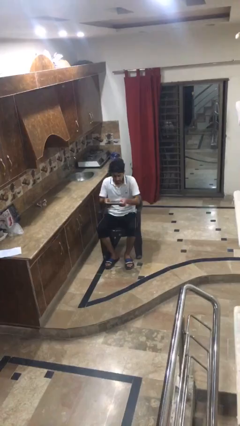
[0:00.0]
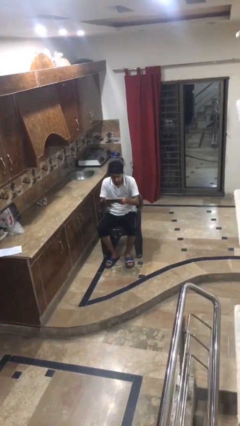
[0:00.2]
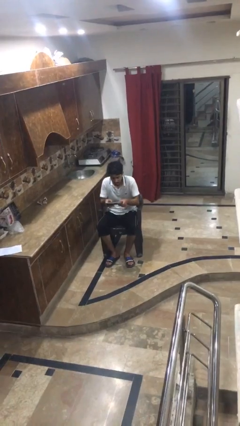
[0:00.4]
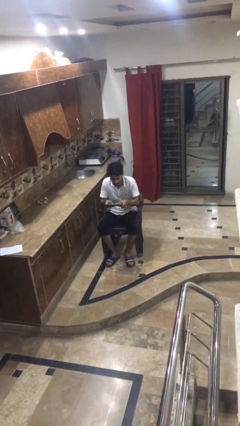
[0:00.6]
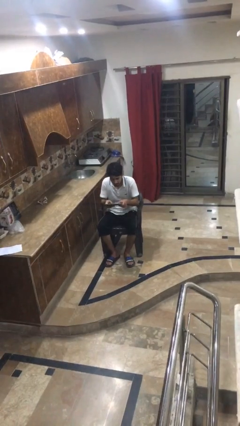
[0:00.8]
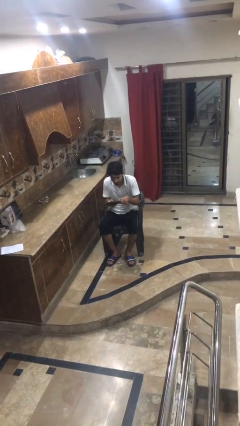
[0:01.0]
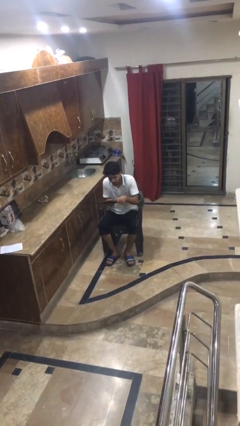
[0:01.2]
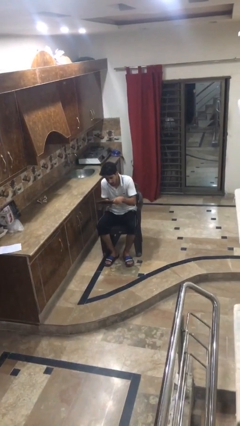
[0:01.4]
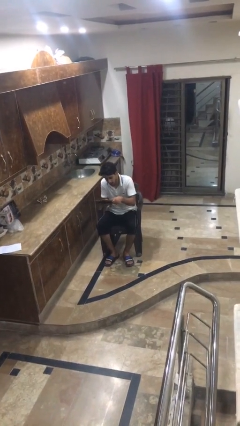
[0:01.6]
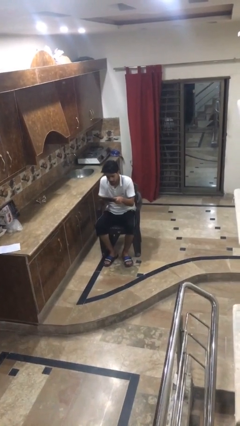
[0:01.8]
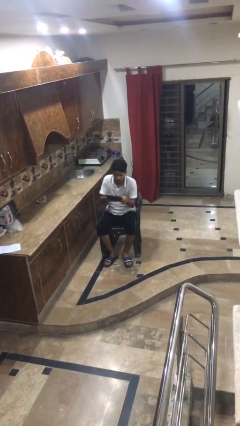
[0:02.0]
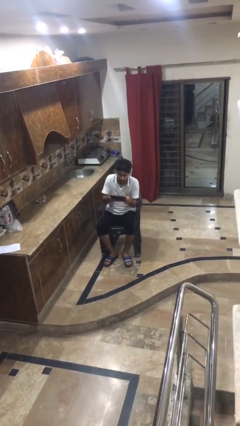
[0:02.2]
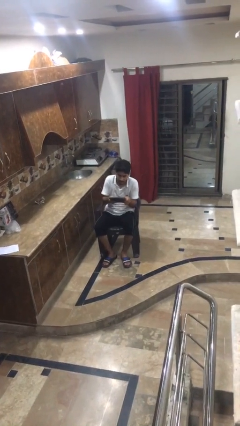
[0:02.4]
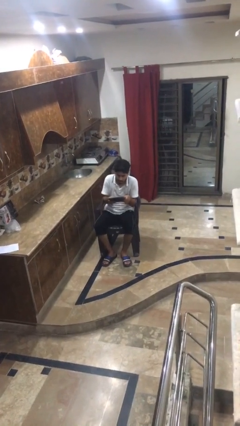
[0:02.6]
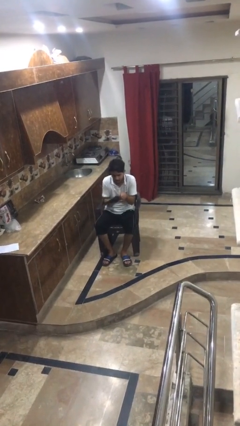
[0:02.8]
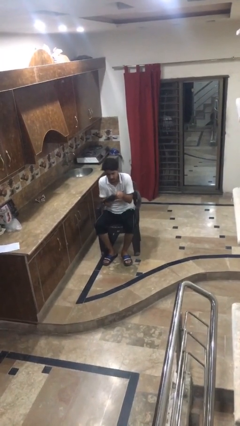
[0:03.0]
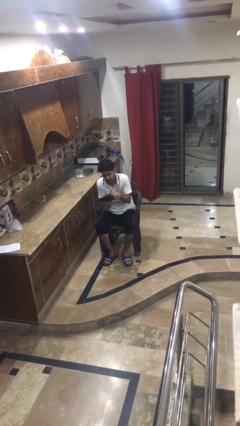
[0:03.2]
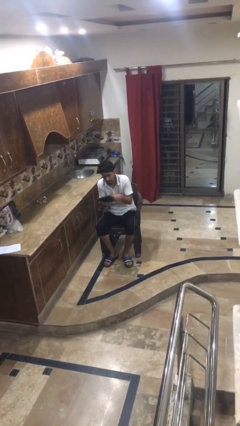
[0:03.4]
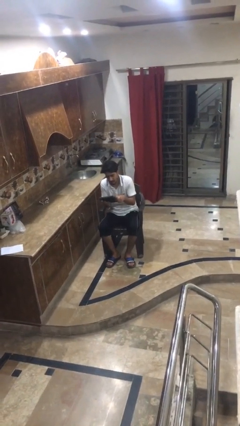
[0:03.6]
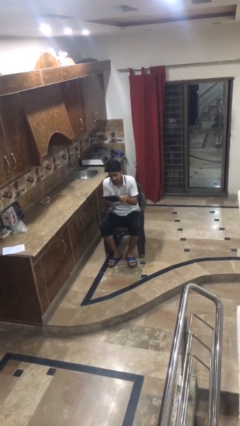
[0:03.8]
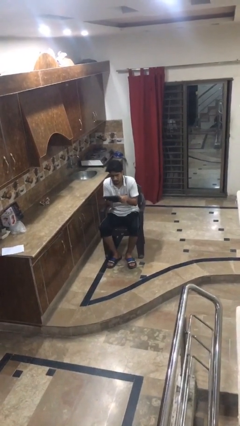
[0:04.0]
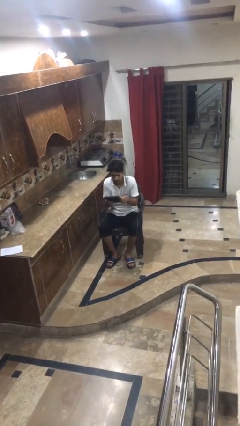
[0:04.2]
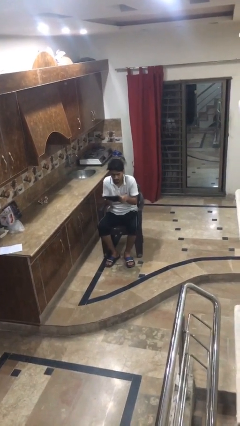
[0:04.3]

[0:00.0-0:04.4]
person interacts with handheld game

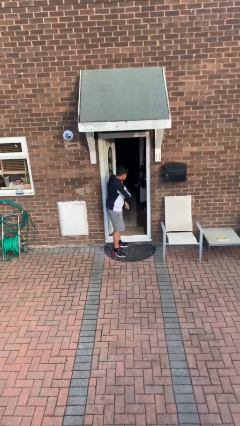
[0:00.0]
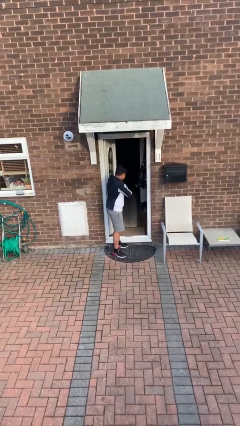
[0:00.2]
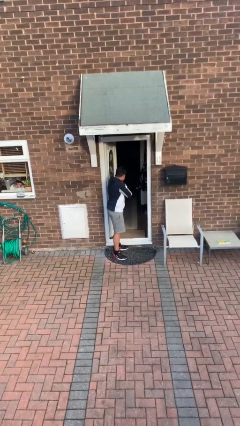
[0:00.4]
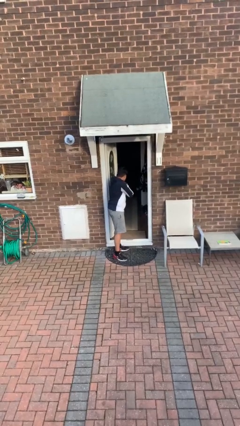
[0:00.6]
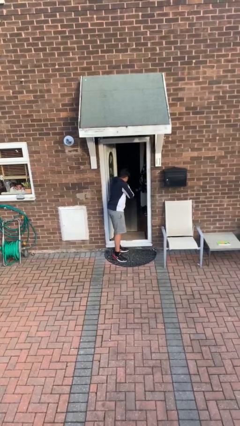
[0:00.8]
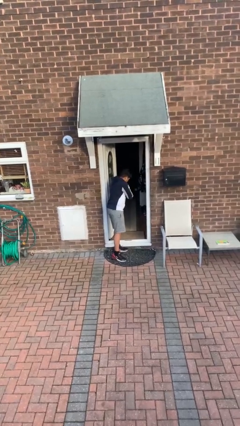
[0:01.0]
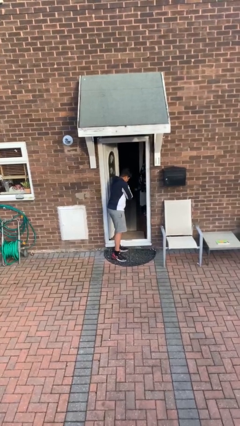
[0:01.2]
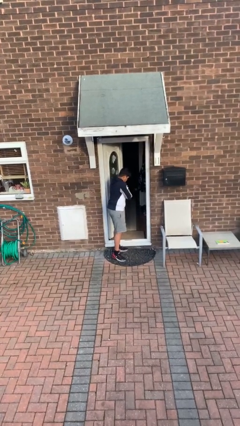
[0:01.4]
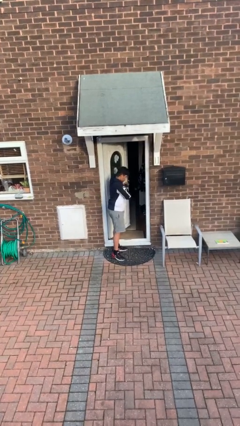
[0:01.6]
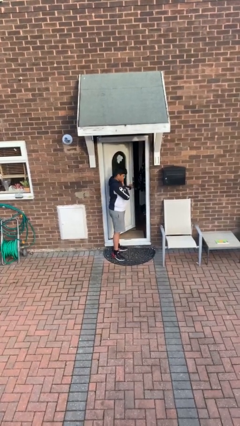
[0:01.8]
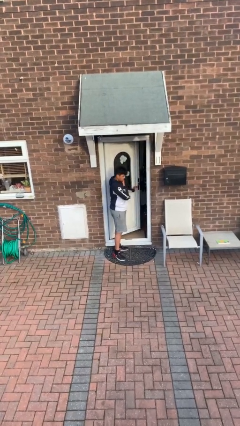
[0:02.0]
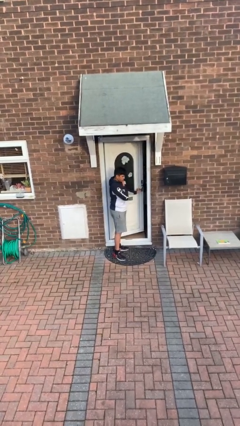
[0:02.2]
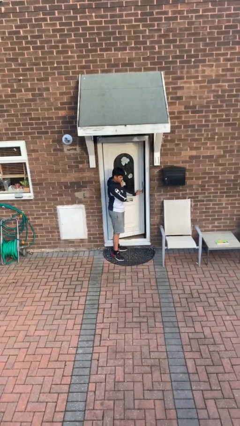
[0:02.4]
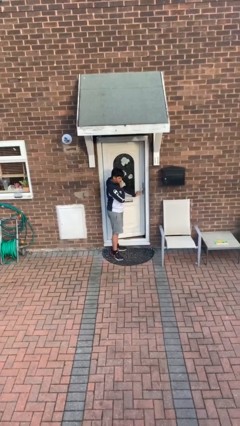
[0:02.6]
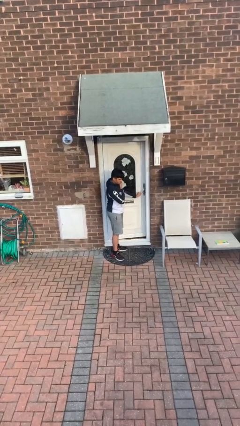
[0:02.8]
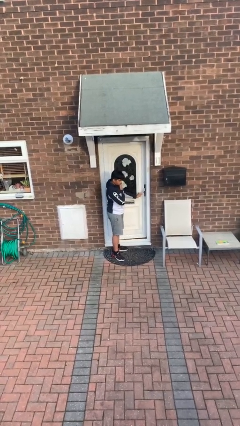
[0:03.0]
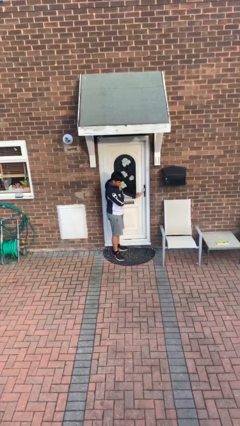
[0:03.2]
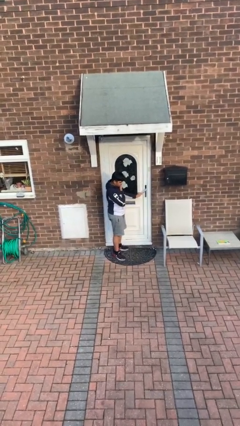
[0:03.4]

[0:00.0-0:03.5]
person closes facility door

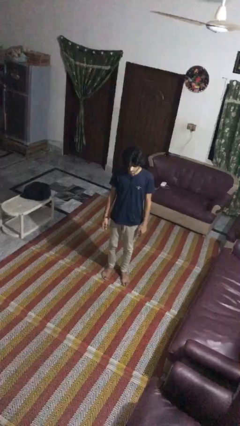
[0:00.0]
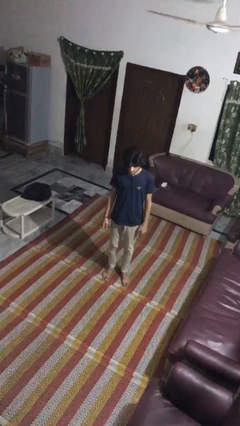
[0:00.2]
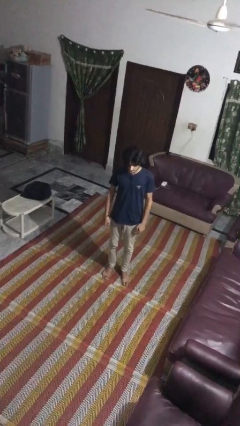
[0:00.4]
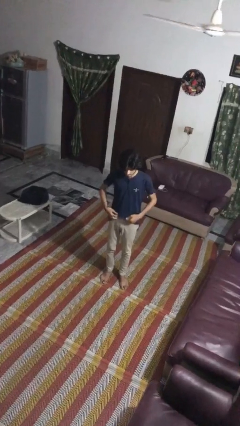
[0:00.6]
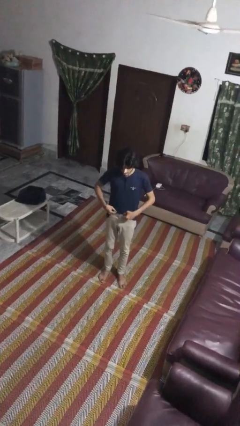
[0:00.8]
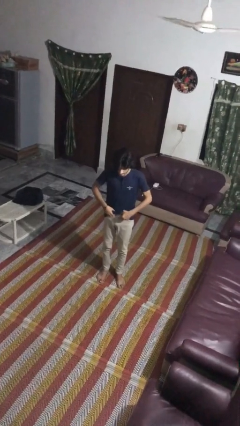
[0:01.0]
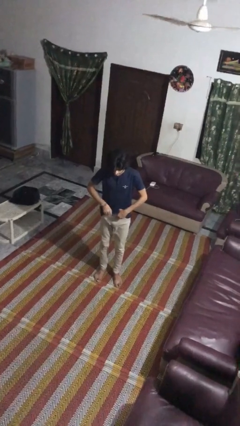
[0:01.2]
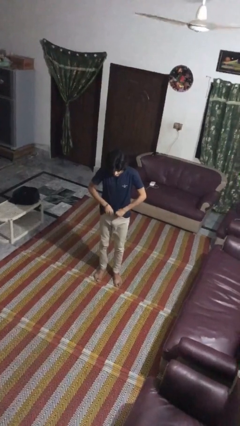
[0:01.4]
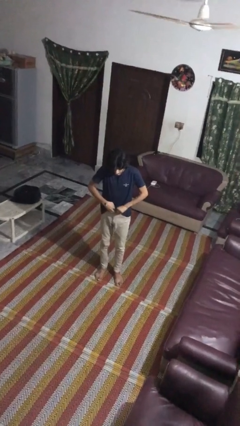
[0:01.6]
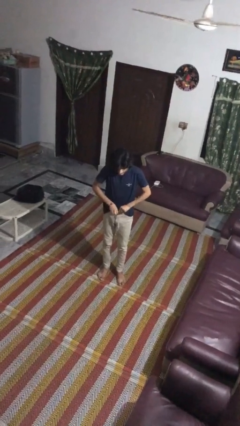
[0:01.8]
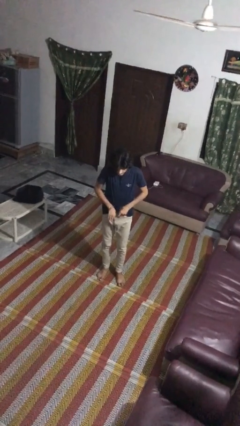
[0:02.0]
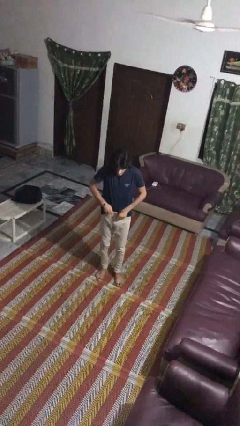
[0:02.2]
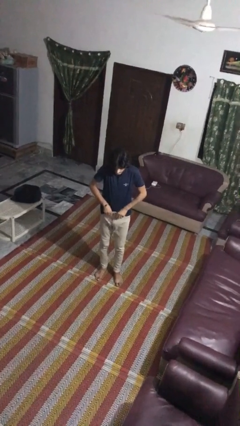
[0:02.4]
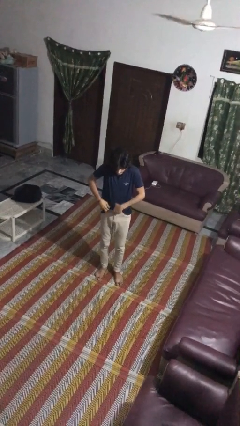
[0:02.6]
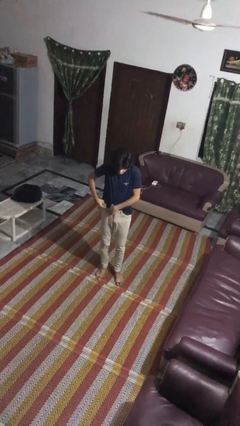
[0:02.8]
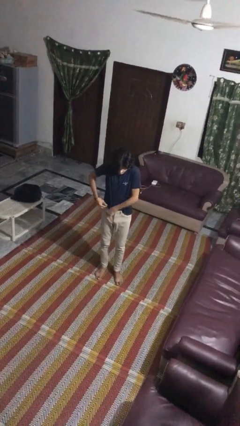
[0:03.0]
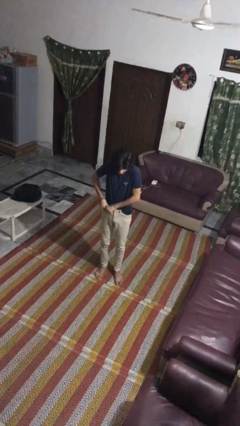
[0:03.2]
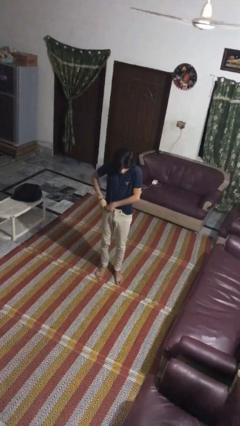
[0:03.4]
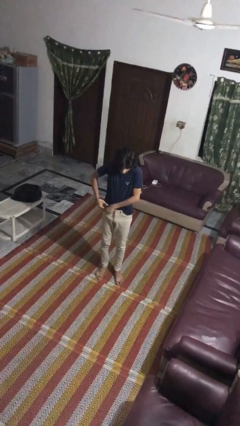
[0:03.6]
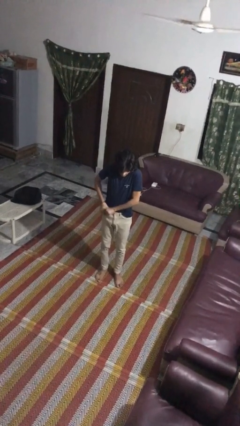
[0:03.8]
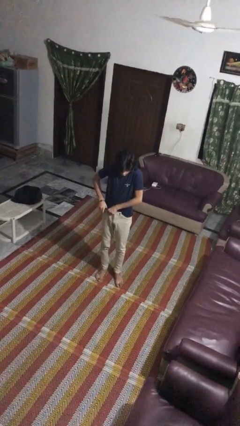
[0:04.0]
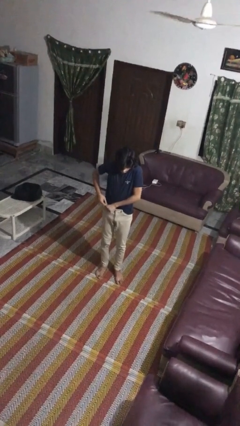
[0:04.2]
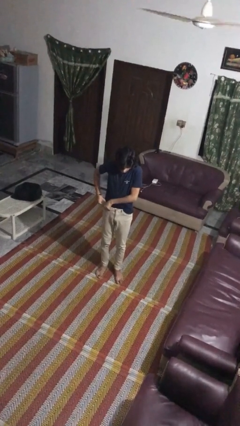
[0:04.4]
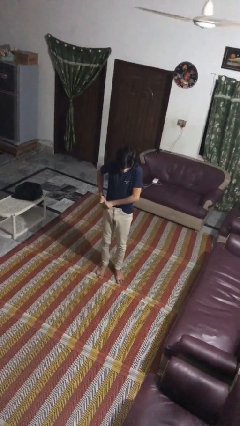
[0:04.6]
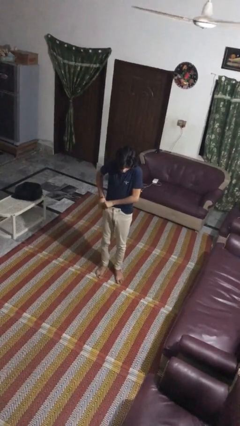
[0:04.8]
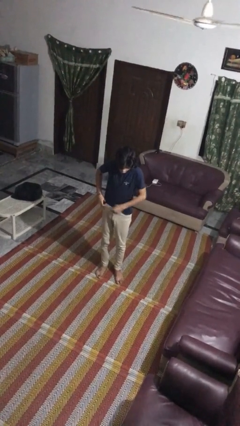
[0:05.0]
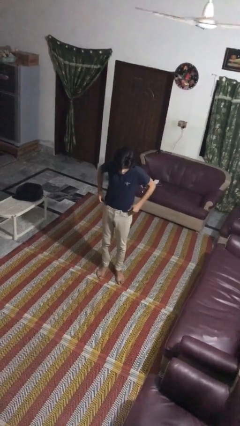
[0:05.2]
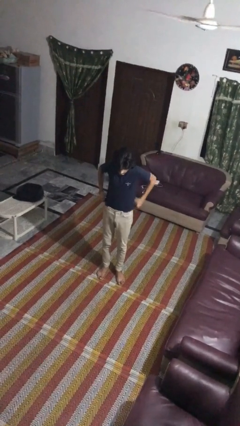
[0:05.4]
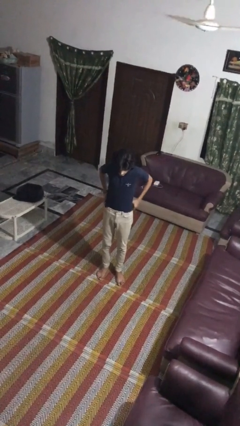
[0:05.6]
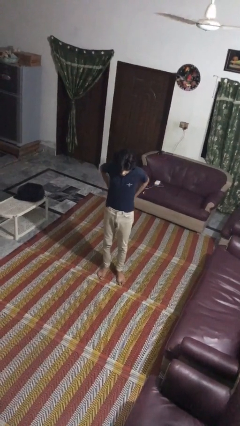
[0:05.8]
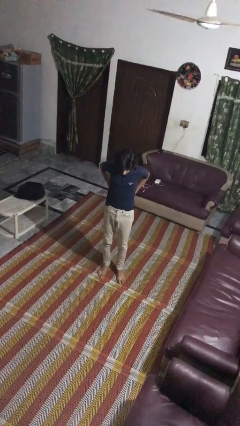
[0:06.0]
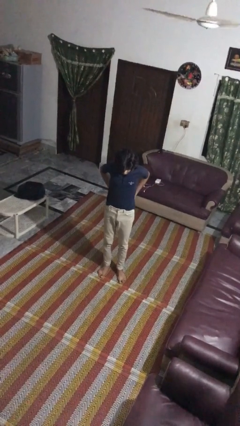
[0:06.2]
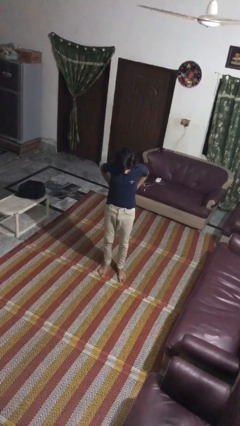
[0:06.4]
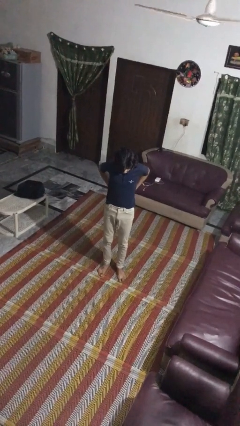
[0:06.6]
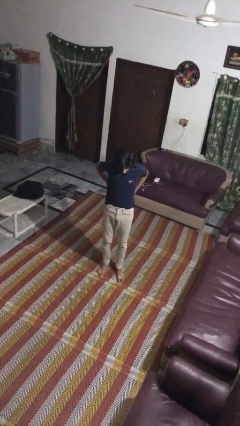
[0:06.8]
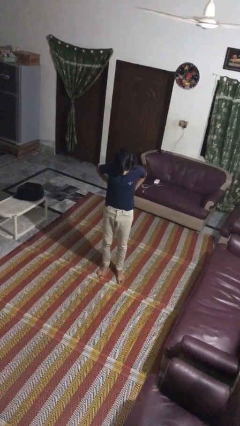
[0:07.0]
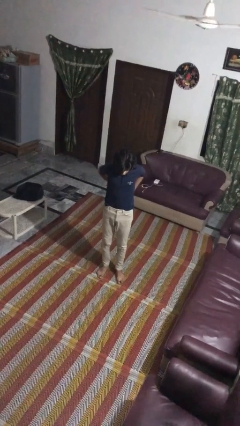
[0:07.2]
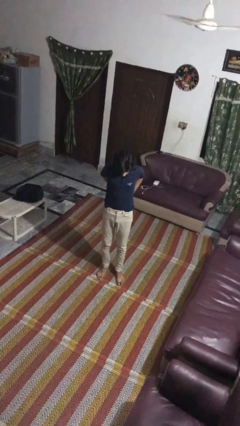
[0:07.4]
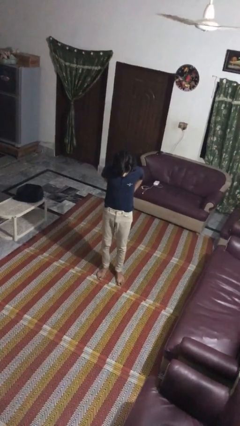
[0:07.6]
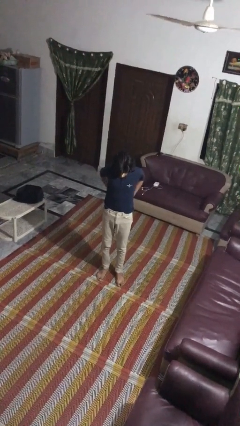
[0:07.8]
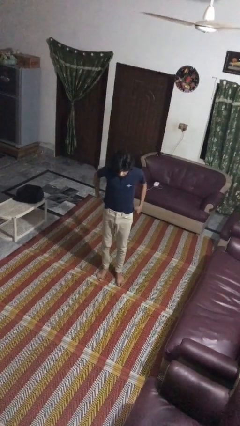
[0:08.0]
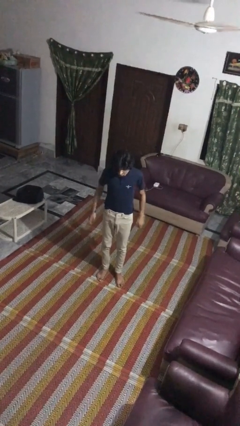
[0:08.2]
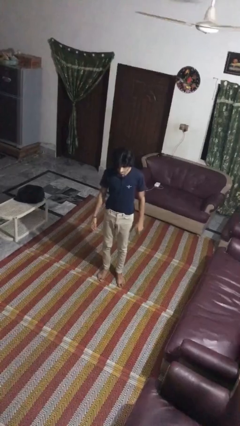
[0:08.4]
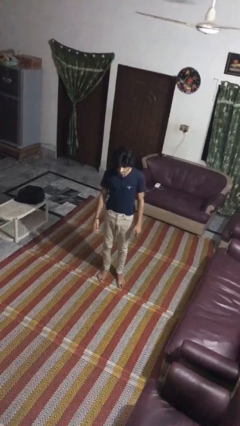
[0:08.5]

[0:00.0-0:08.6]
person tucks in shirt

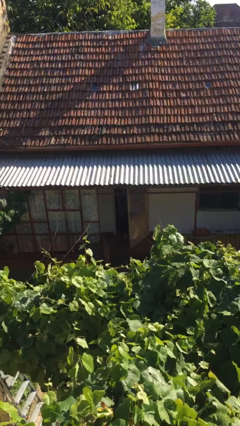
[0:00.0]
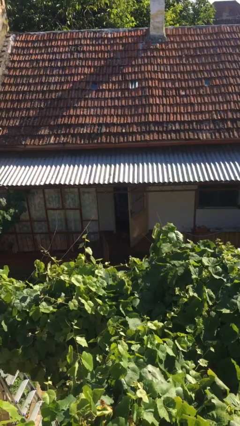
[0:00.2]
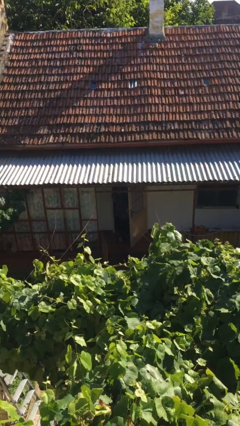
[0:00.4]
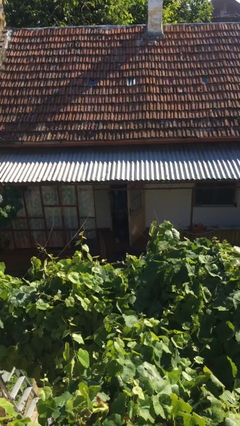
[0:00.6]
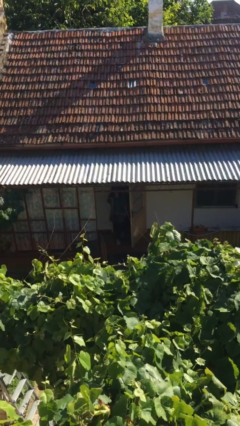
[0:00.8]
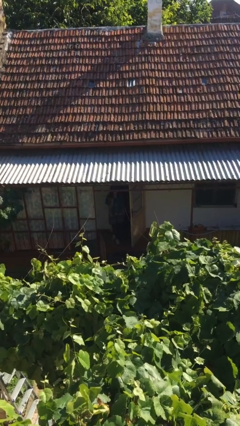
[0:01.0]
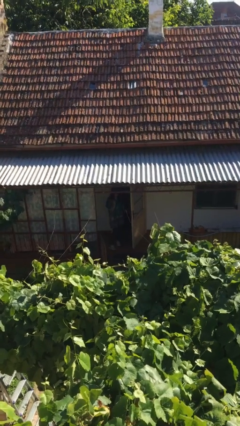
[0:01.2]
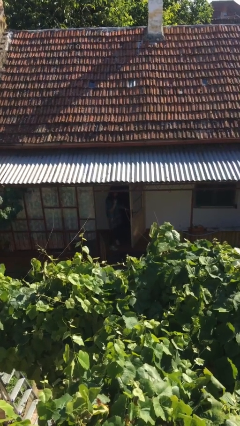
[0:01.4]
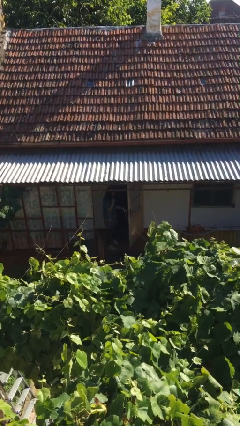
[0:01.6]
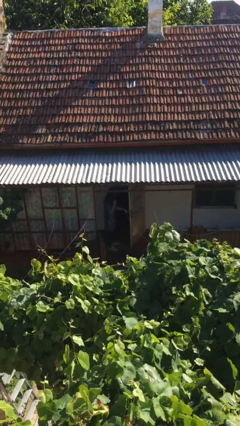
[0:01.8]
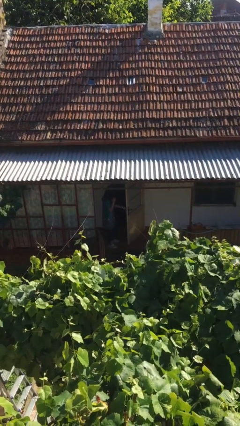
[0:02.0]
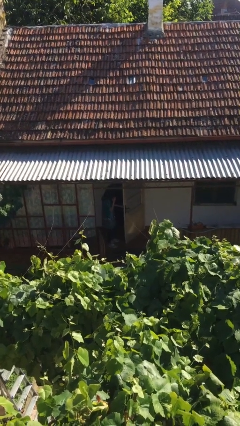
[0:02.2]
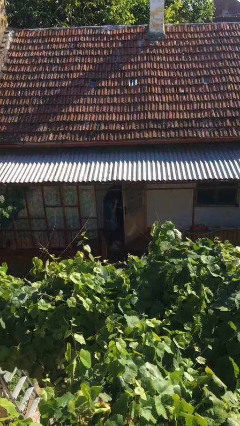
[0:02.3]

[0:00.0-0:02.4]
person enters scene through structure
